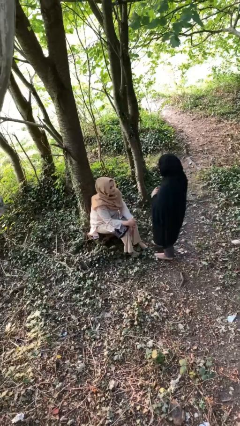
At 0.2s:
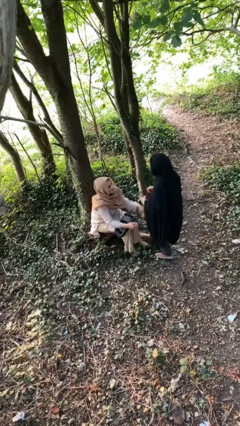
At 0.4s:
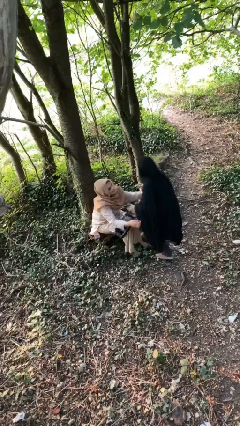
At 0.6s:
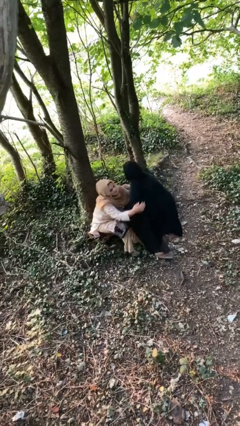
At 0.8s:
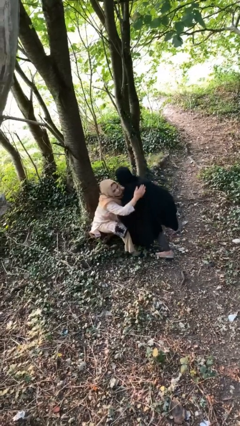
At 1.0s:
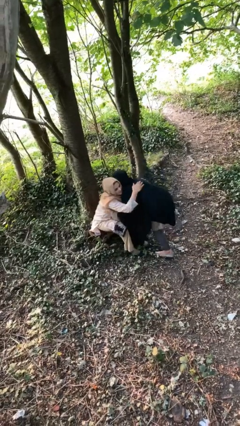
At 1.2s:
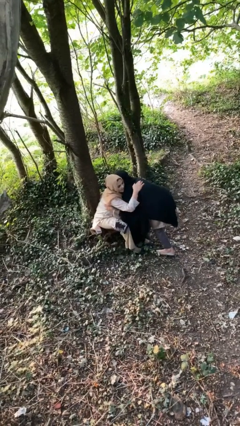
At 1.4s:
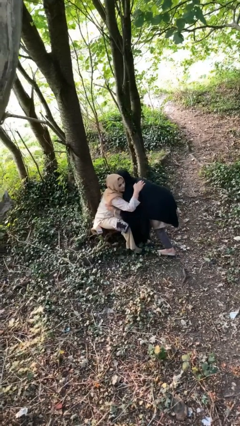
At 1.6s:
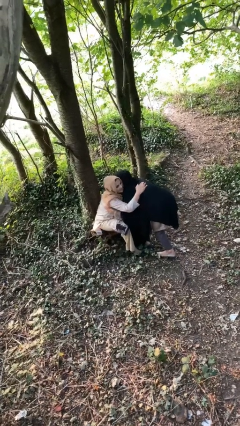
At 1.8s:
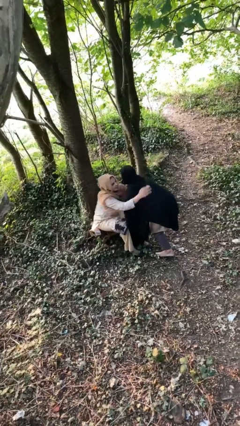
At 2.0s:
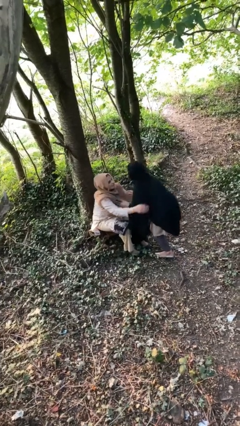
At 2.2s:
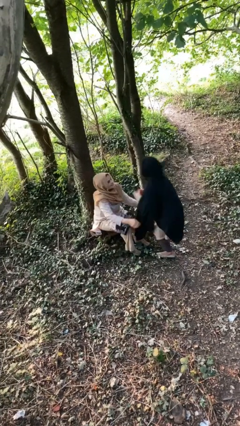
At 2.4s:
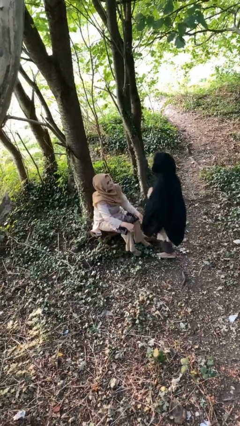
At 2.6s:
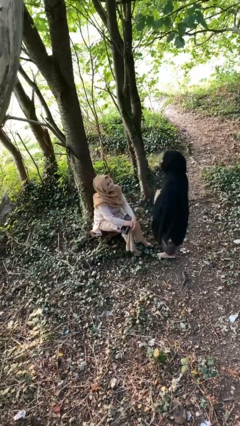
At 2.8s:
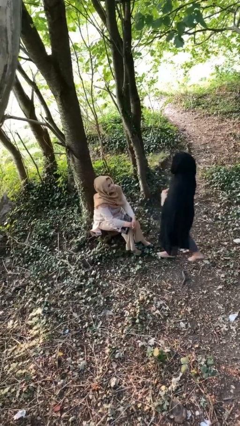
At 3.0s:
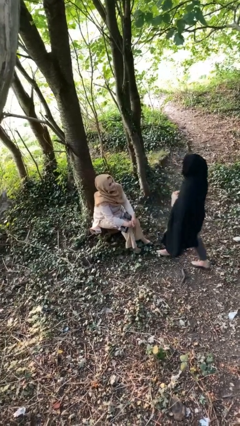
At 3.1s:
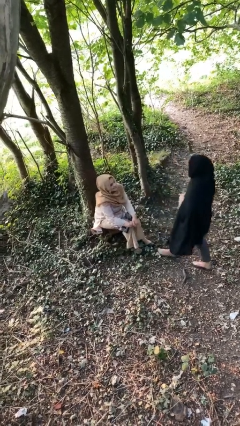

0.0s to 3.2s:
person embraces person

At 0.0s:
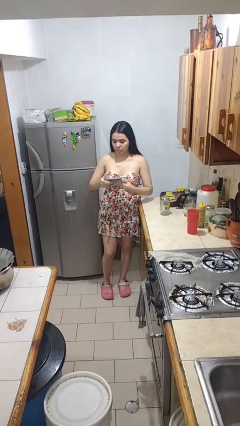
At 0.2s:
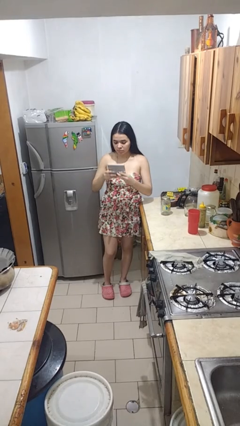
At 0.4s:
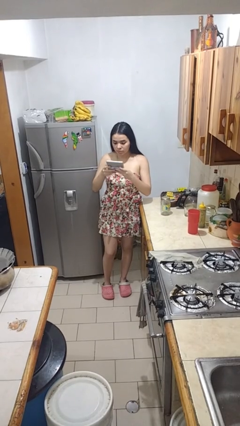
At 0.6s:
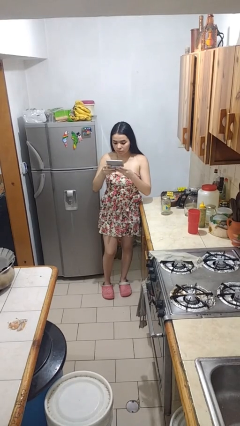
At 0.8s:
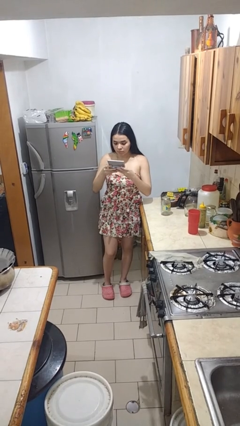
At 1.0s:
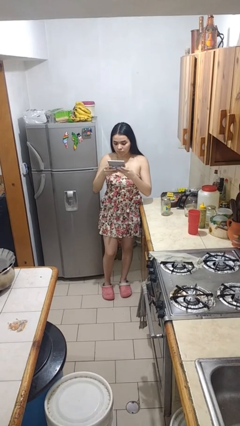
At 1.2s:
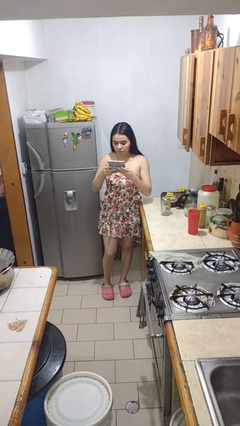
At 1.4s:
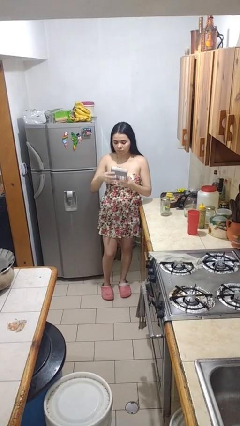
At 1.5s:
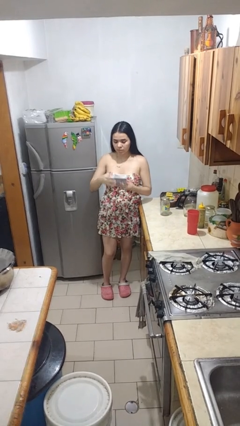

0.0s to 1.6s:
person interacts with handheld game

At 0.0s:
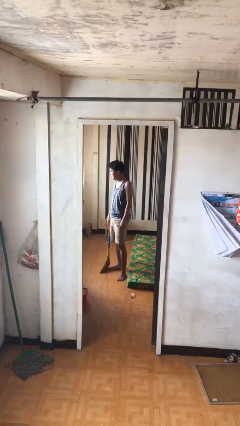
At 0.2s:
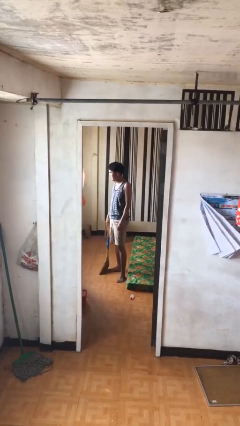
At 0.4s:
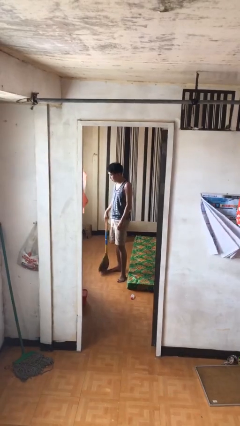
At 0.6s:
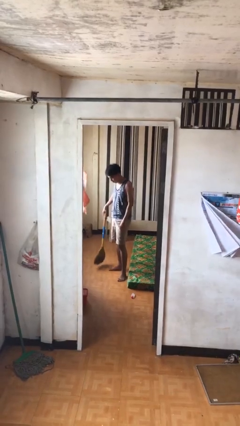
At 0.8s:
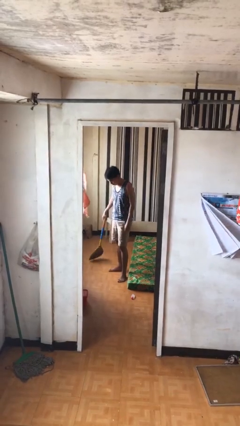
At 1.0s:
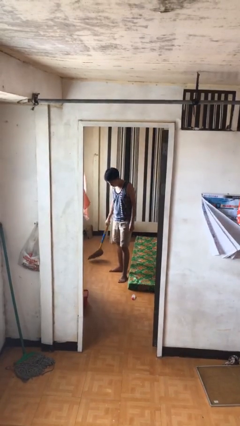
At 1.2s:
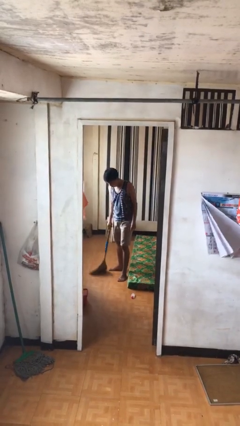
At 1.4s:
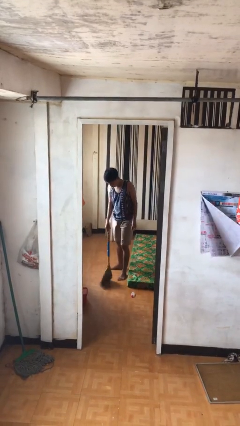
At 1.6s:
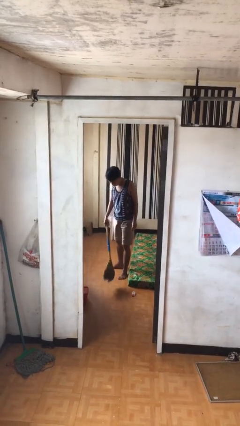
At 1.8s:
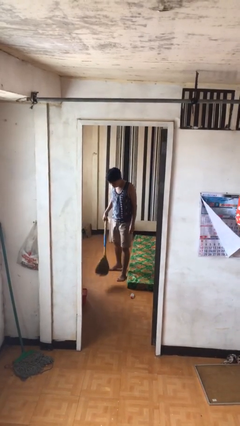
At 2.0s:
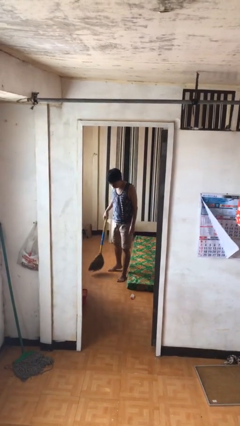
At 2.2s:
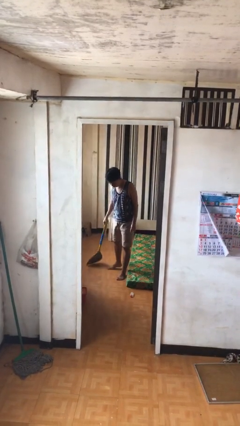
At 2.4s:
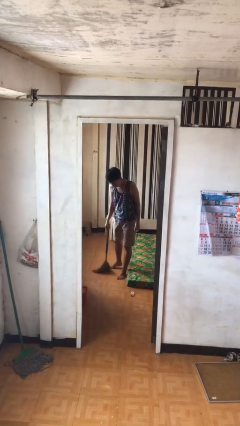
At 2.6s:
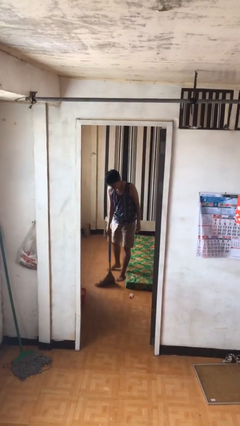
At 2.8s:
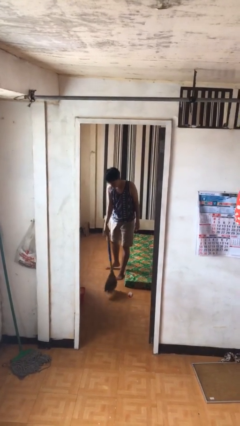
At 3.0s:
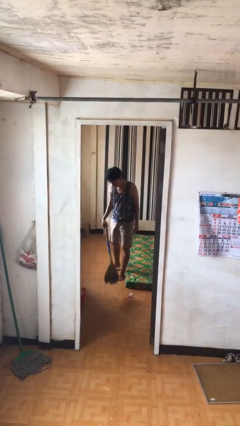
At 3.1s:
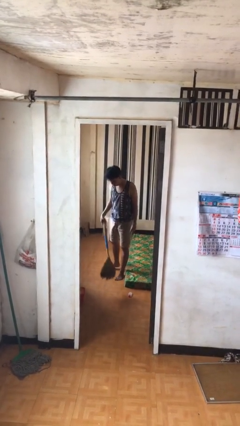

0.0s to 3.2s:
person sweeps floor

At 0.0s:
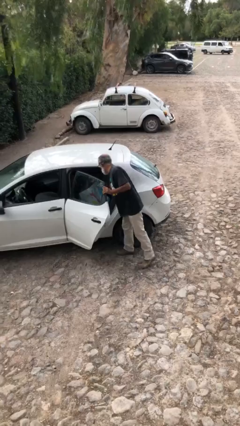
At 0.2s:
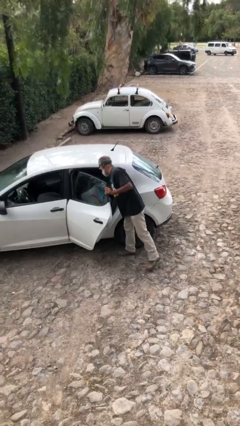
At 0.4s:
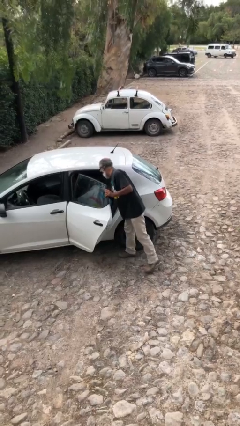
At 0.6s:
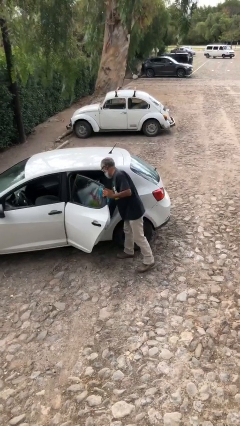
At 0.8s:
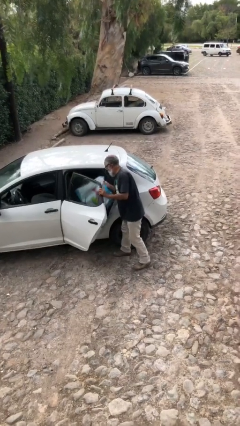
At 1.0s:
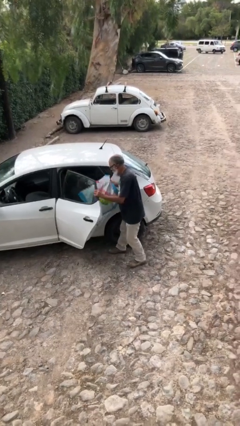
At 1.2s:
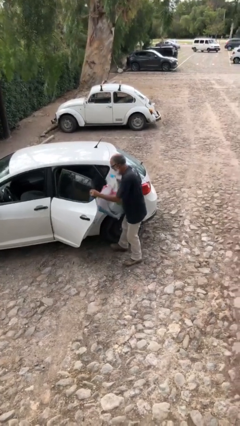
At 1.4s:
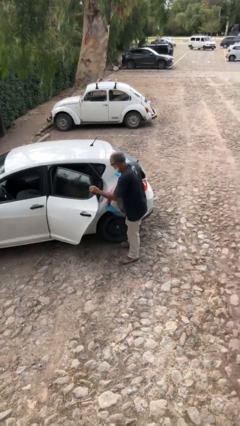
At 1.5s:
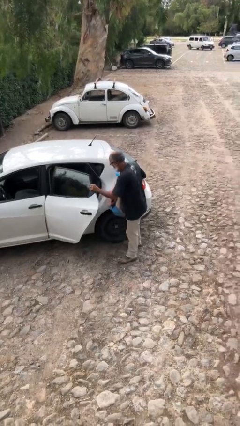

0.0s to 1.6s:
person unloads car

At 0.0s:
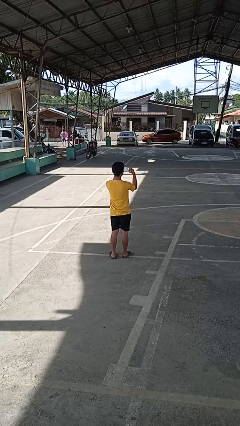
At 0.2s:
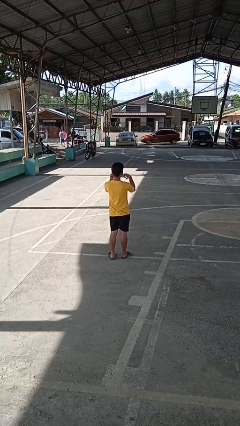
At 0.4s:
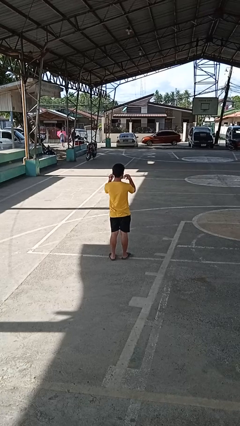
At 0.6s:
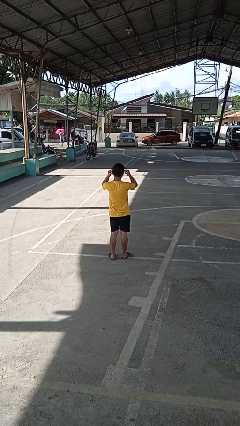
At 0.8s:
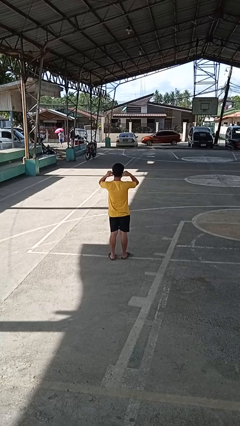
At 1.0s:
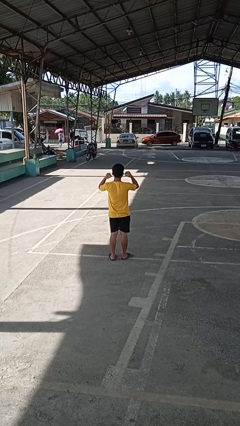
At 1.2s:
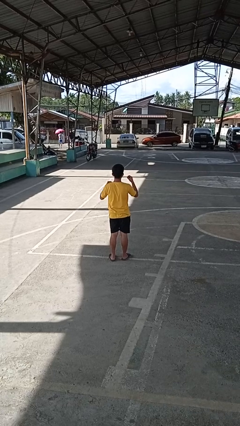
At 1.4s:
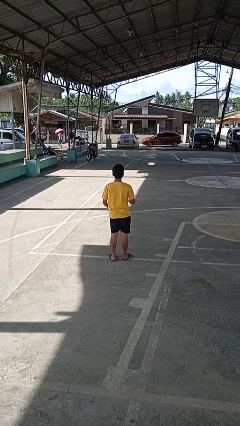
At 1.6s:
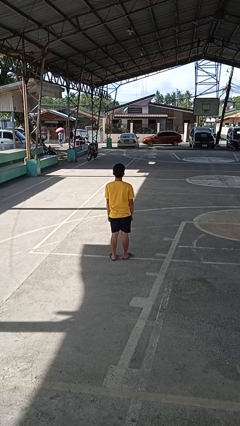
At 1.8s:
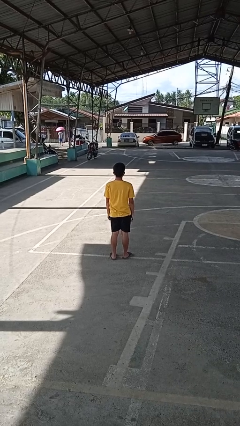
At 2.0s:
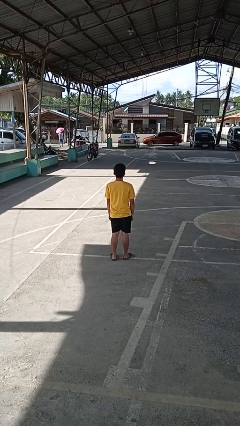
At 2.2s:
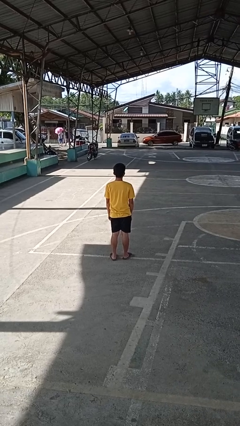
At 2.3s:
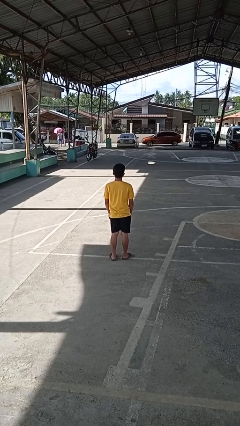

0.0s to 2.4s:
person puts on facemask

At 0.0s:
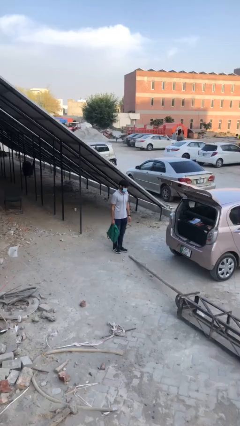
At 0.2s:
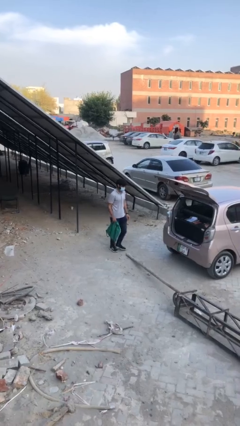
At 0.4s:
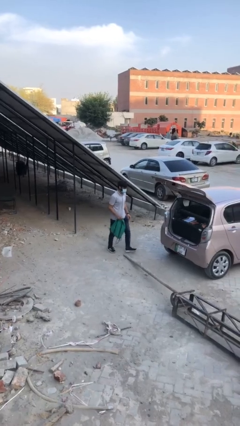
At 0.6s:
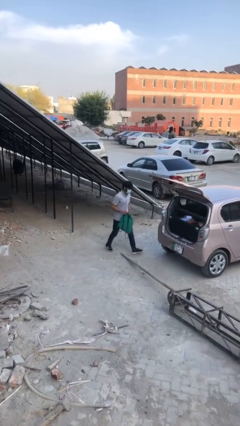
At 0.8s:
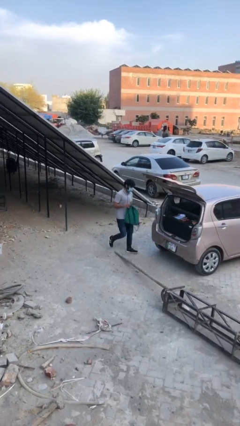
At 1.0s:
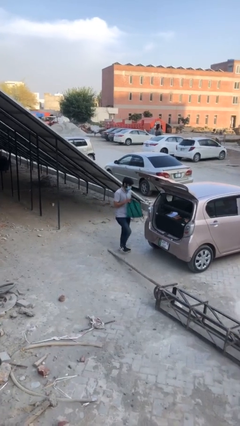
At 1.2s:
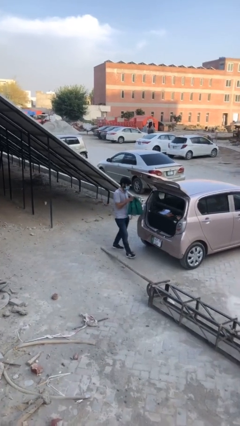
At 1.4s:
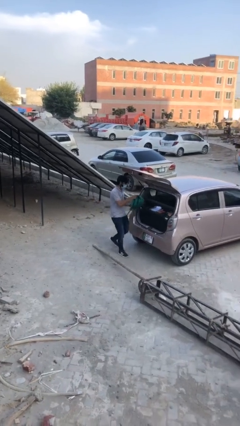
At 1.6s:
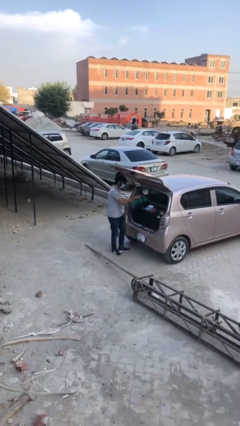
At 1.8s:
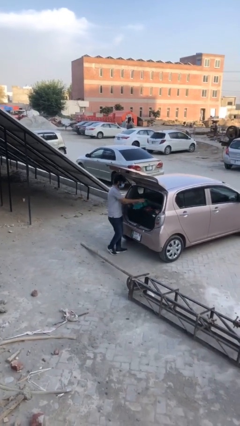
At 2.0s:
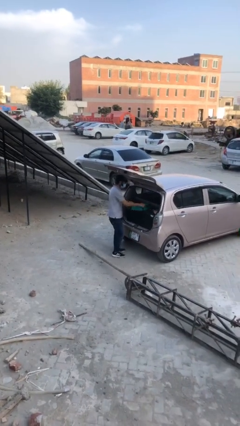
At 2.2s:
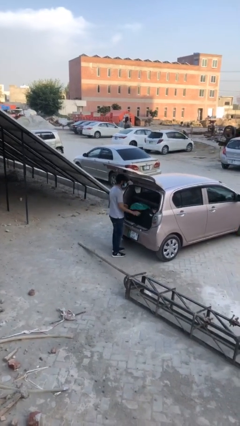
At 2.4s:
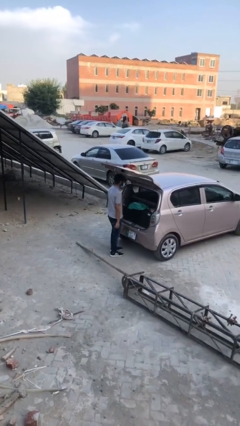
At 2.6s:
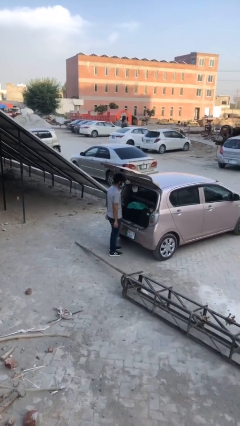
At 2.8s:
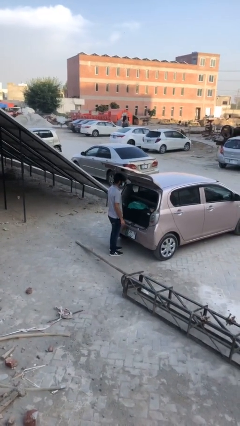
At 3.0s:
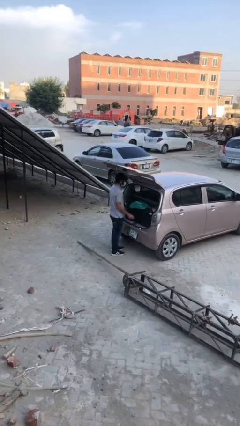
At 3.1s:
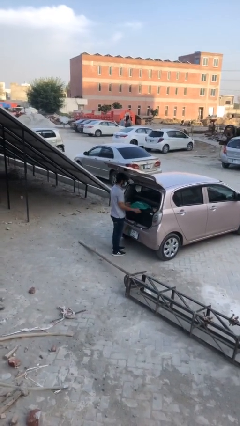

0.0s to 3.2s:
person loads car

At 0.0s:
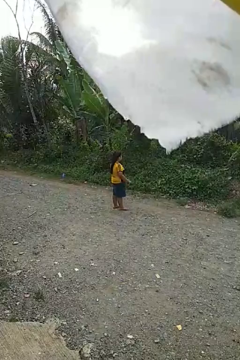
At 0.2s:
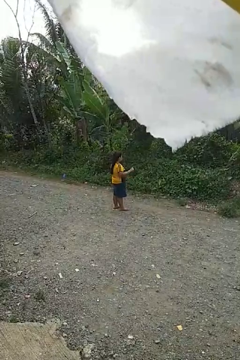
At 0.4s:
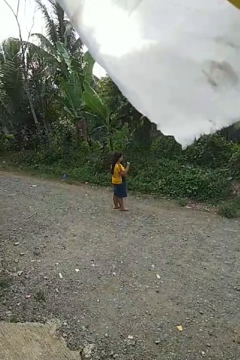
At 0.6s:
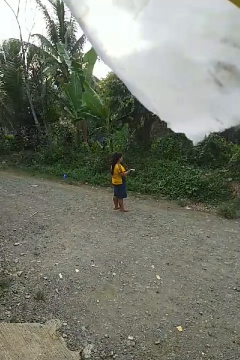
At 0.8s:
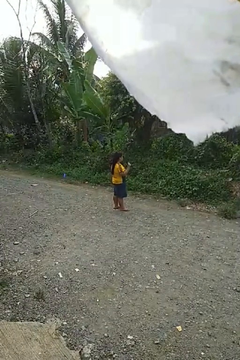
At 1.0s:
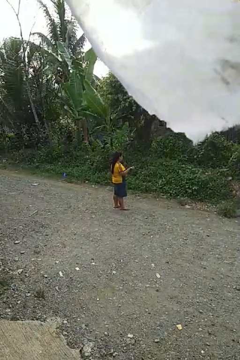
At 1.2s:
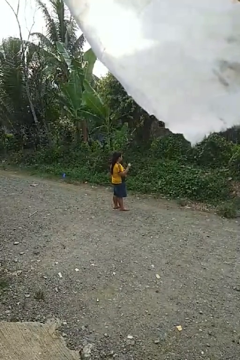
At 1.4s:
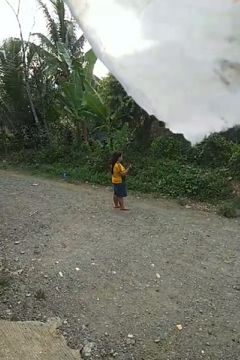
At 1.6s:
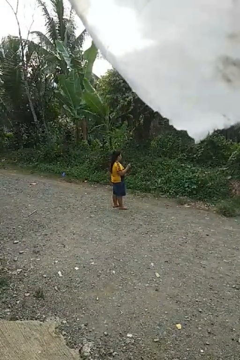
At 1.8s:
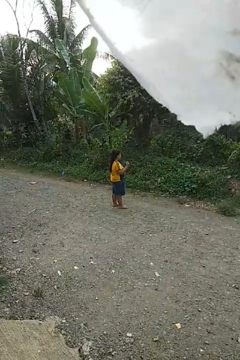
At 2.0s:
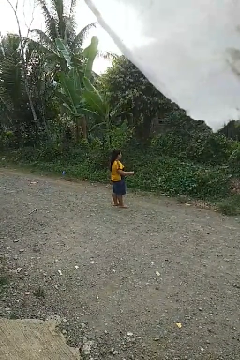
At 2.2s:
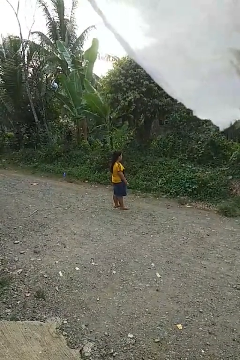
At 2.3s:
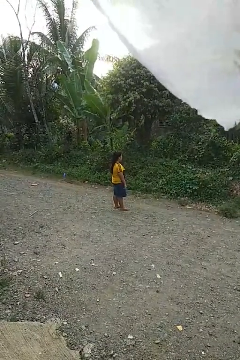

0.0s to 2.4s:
person snaps fingers

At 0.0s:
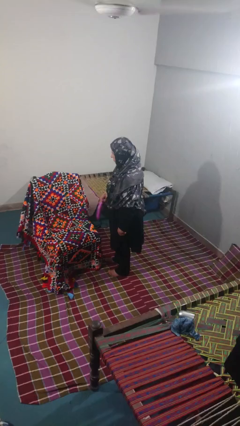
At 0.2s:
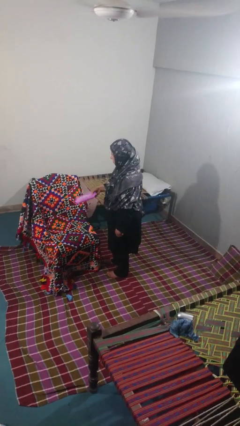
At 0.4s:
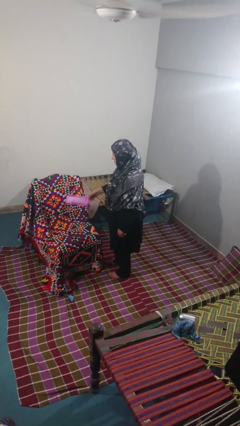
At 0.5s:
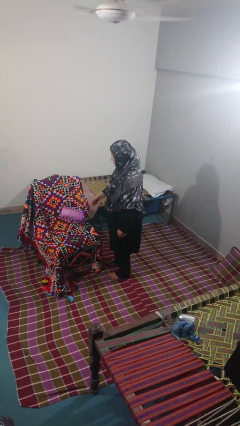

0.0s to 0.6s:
person puts down object on couch
